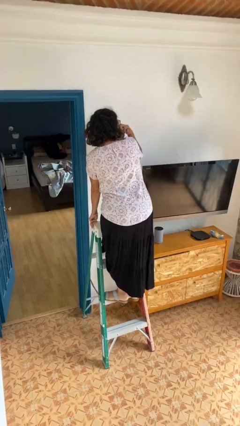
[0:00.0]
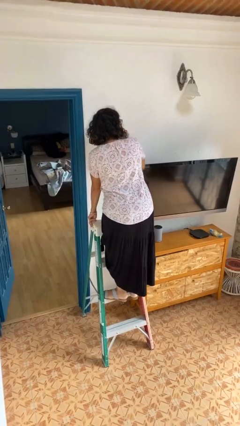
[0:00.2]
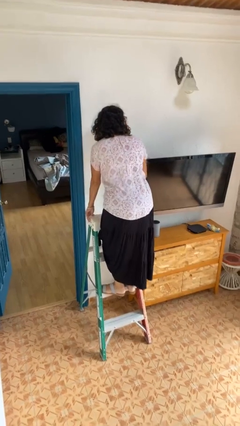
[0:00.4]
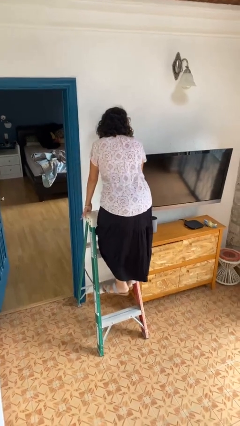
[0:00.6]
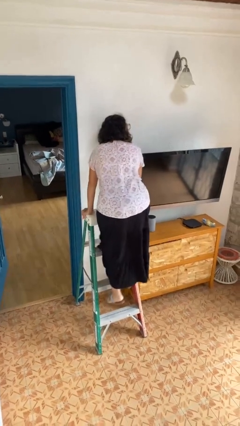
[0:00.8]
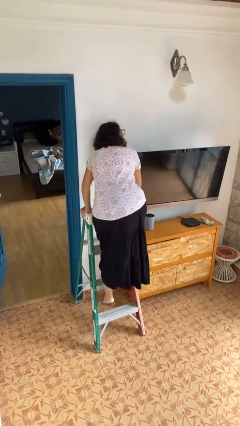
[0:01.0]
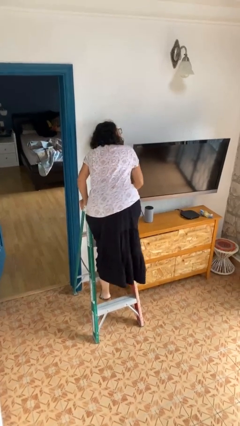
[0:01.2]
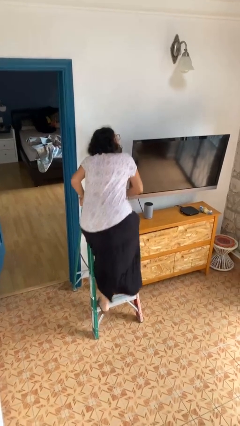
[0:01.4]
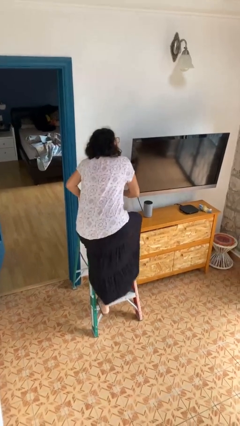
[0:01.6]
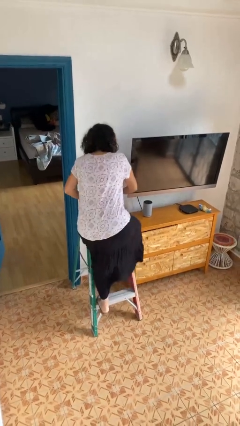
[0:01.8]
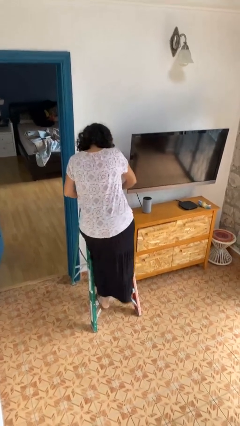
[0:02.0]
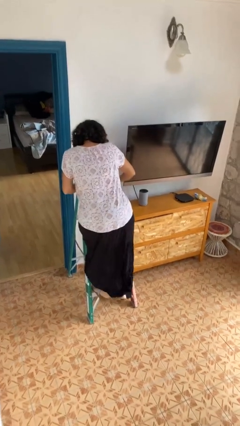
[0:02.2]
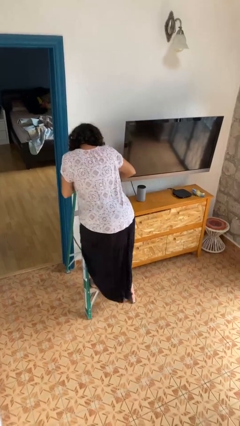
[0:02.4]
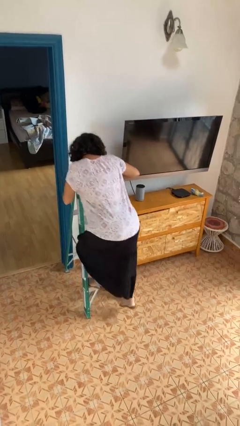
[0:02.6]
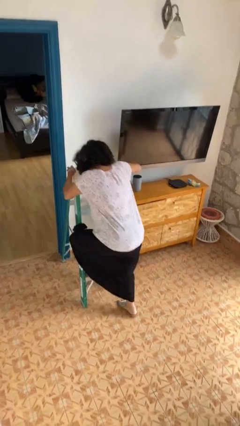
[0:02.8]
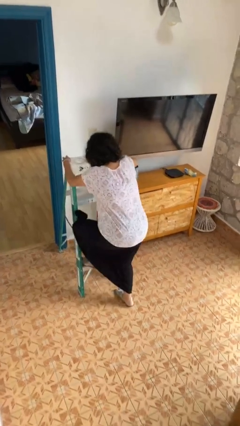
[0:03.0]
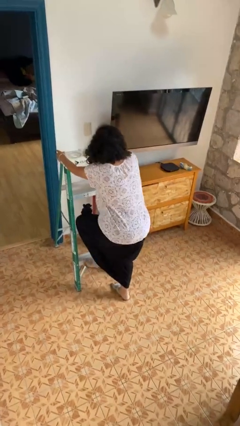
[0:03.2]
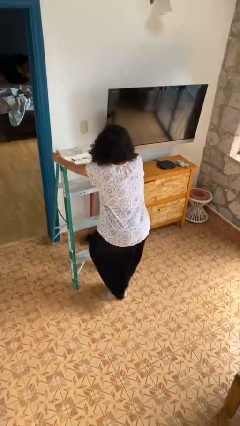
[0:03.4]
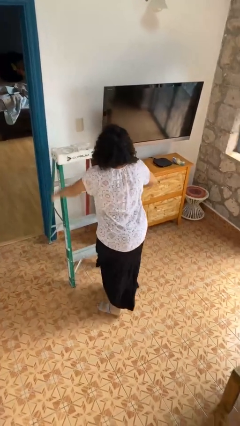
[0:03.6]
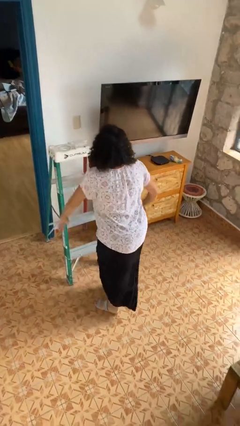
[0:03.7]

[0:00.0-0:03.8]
person climbs down ladder

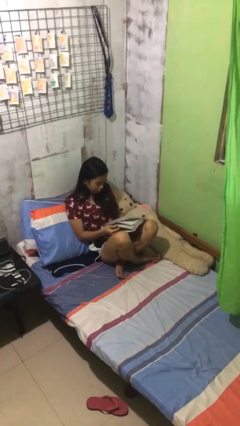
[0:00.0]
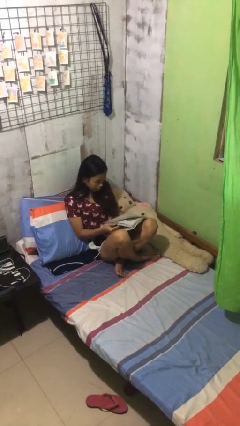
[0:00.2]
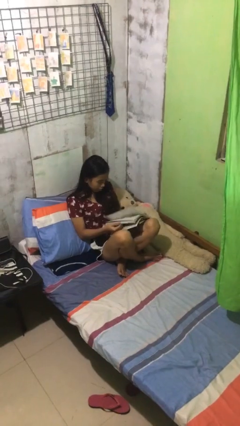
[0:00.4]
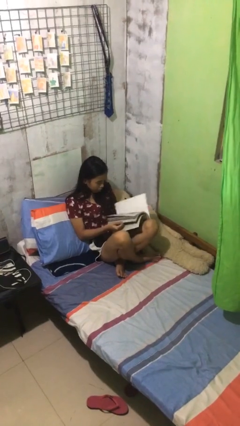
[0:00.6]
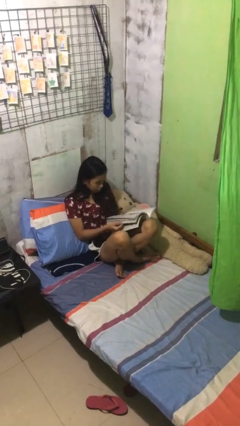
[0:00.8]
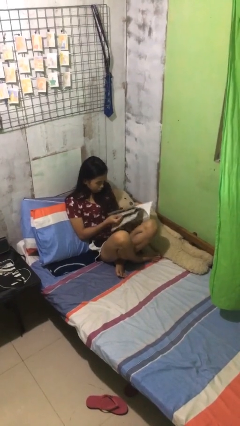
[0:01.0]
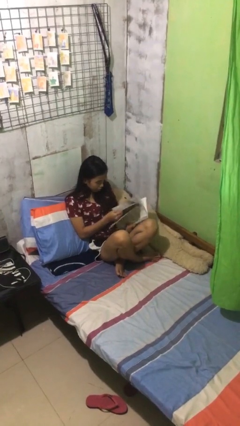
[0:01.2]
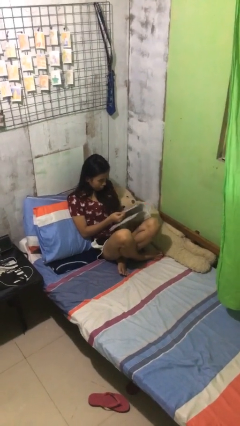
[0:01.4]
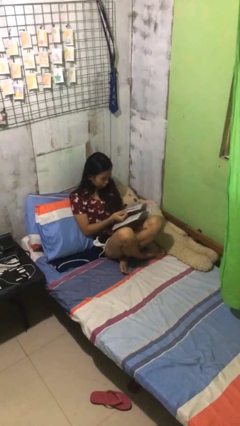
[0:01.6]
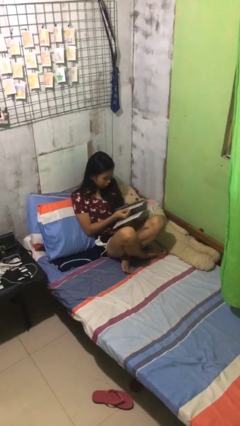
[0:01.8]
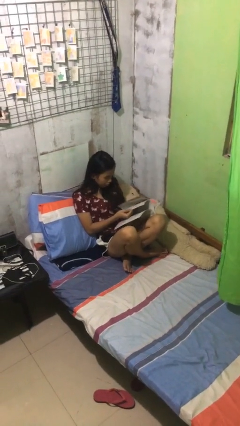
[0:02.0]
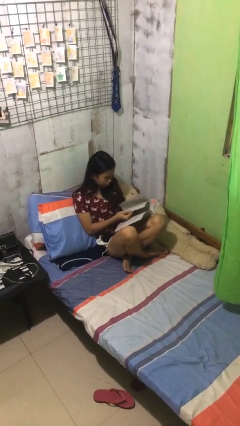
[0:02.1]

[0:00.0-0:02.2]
person reads document

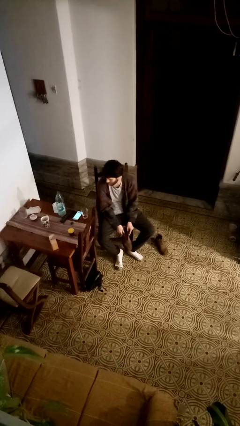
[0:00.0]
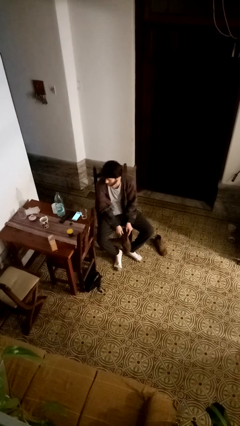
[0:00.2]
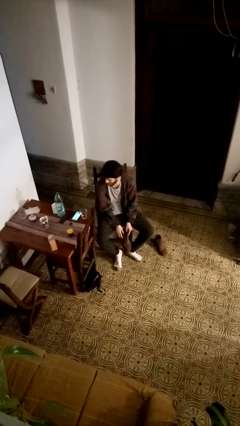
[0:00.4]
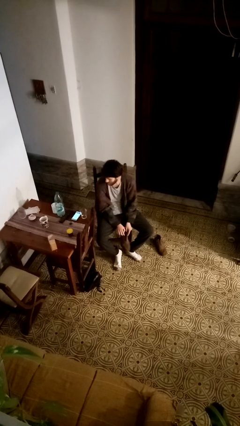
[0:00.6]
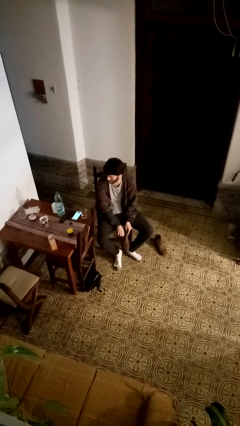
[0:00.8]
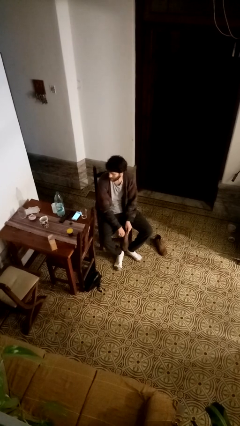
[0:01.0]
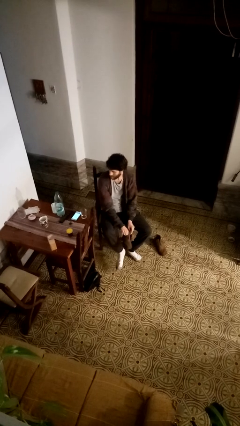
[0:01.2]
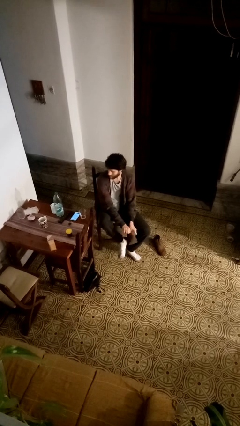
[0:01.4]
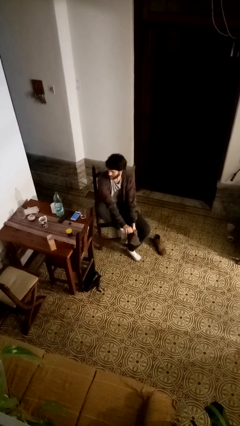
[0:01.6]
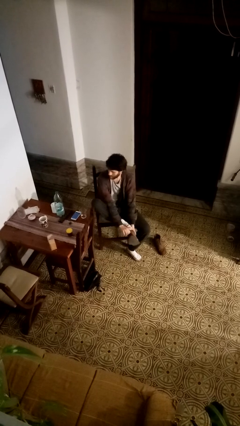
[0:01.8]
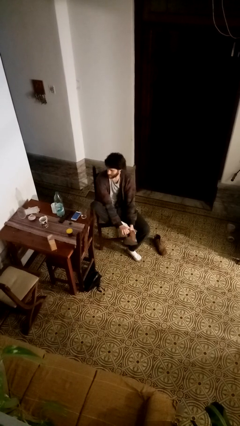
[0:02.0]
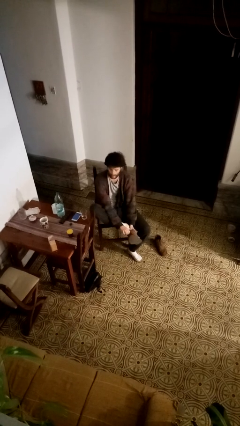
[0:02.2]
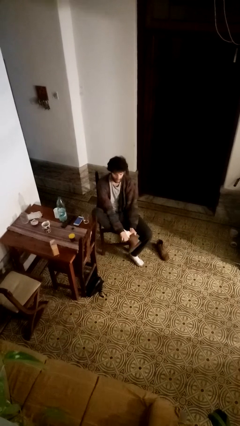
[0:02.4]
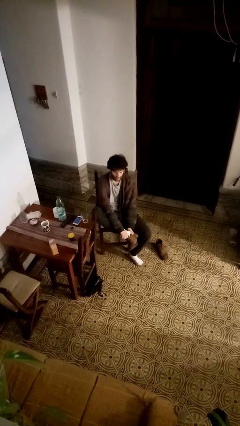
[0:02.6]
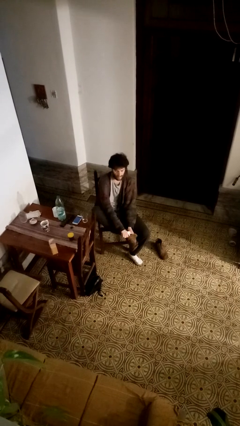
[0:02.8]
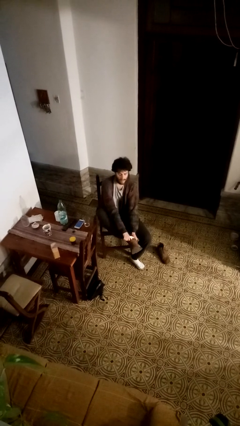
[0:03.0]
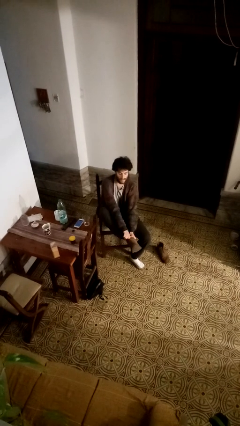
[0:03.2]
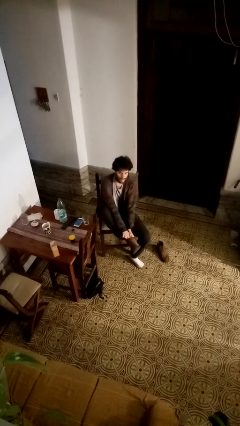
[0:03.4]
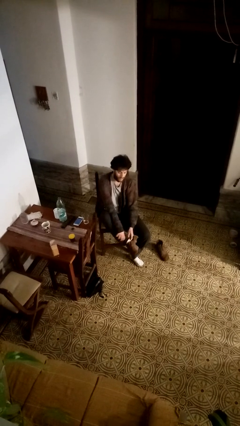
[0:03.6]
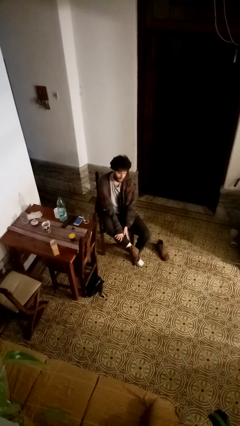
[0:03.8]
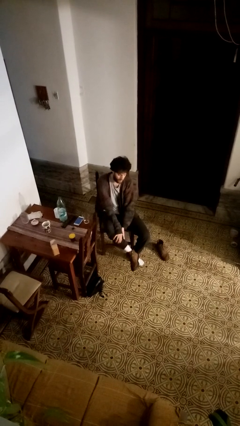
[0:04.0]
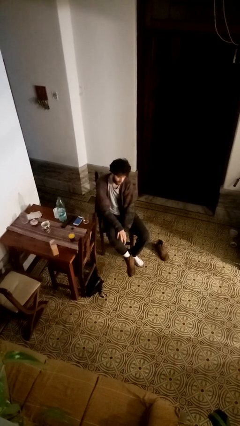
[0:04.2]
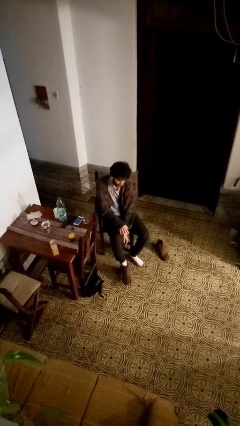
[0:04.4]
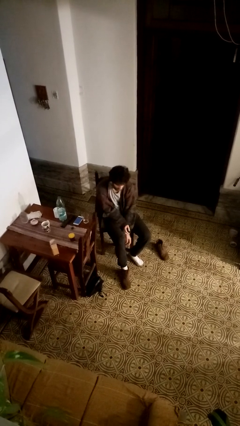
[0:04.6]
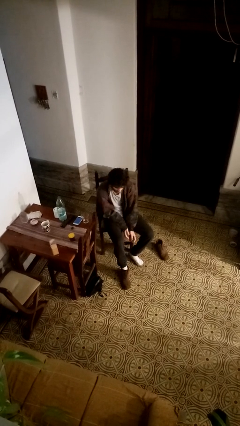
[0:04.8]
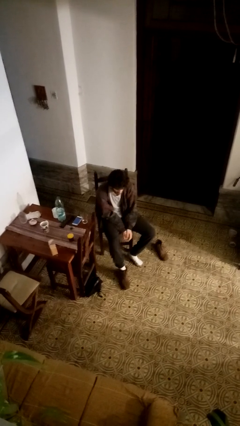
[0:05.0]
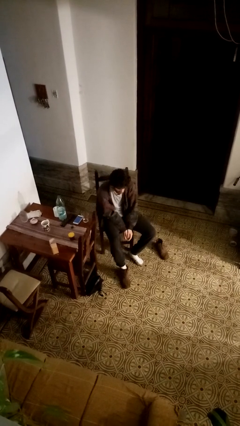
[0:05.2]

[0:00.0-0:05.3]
person puts on boots

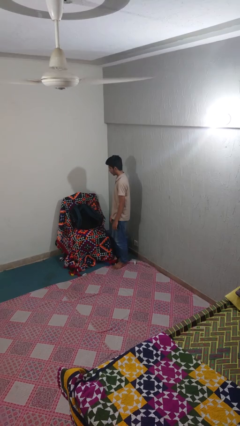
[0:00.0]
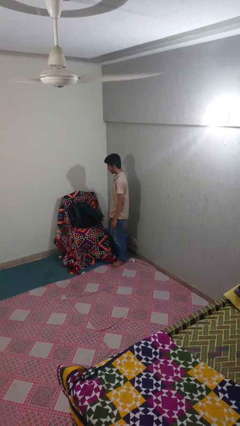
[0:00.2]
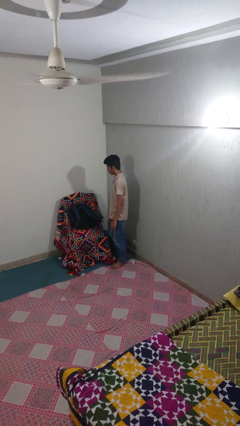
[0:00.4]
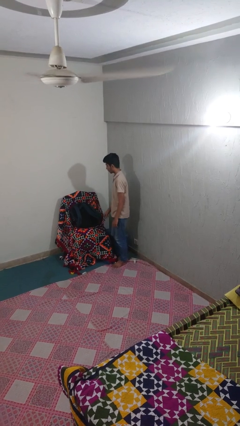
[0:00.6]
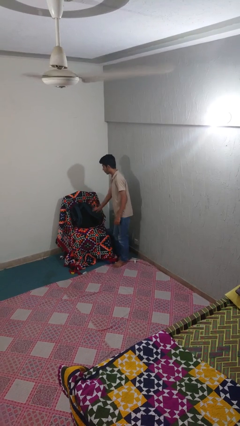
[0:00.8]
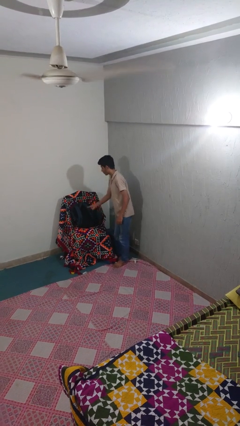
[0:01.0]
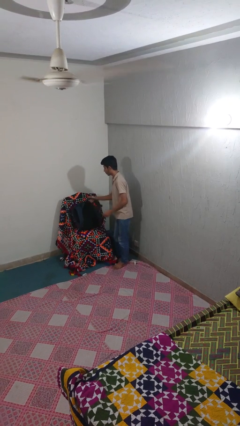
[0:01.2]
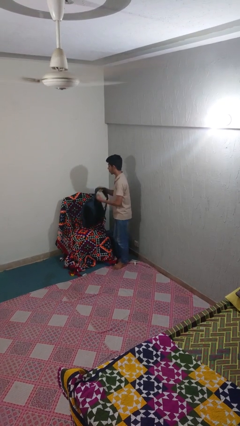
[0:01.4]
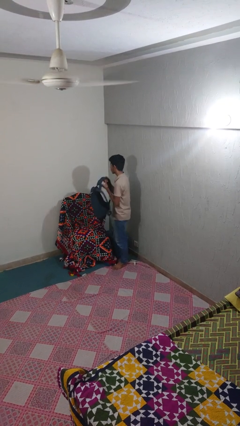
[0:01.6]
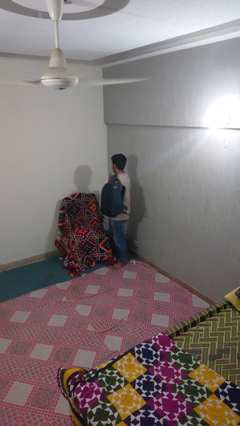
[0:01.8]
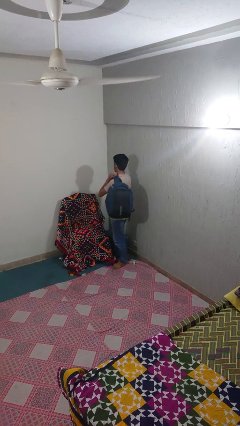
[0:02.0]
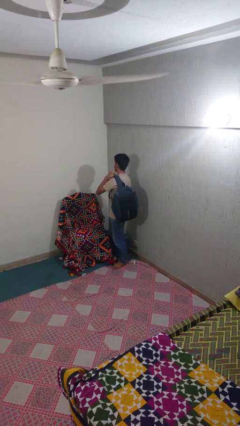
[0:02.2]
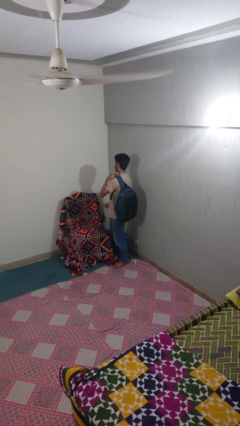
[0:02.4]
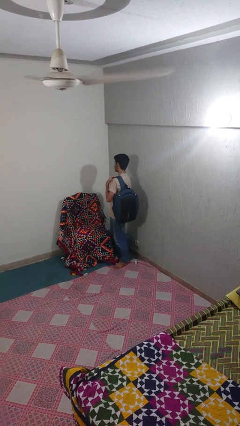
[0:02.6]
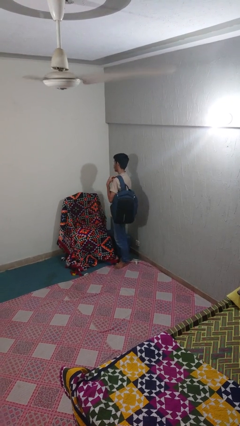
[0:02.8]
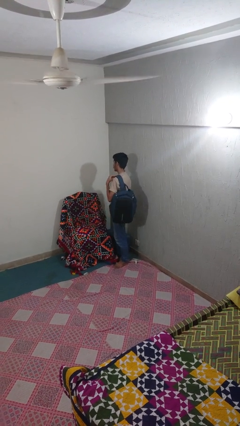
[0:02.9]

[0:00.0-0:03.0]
person picks up object from couch

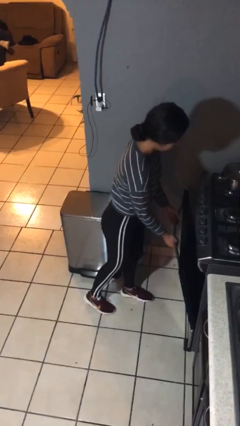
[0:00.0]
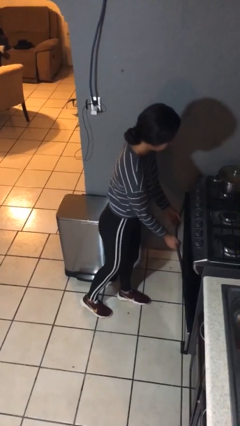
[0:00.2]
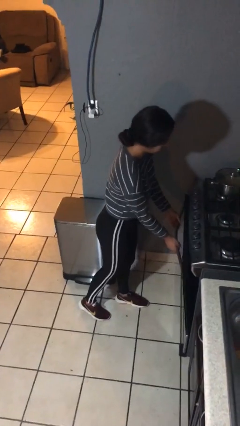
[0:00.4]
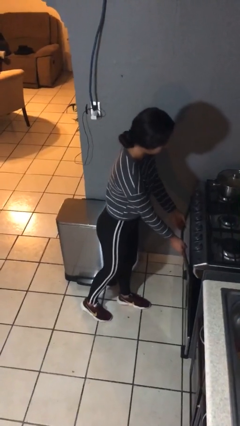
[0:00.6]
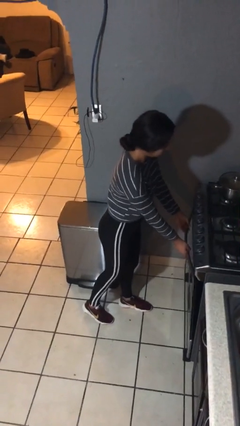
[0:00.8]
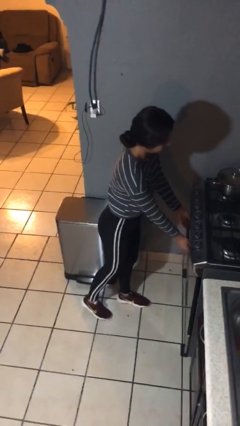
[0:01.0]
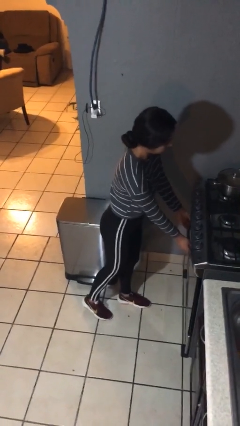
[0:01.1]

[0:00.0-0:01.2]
person closes oven door

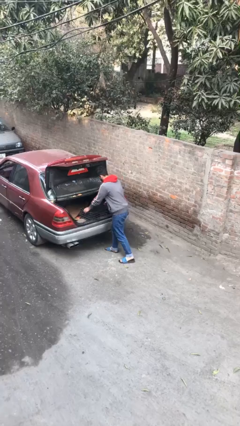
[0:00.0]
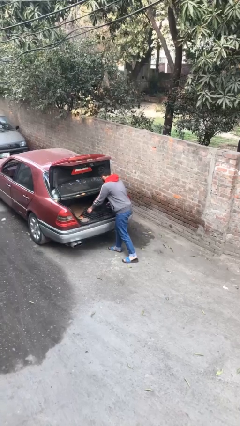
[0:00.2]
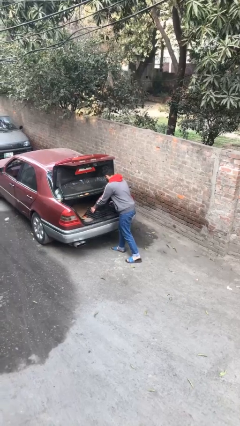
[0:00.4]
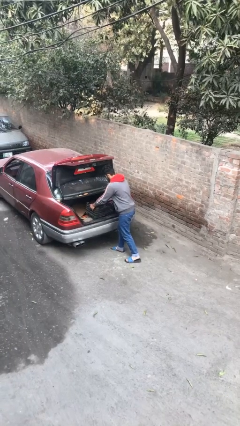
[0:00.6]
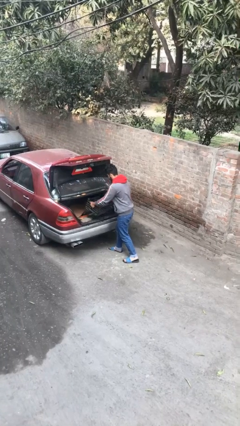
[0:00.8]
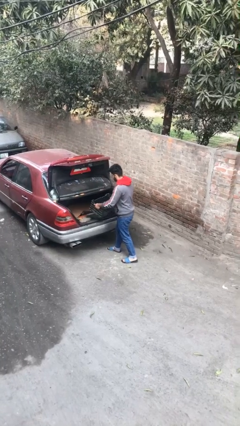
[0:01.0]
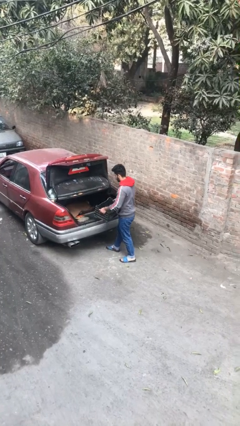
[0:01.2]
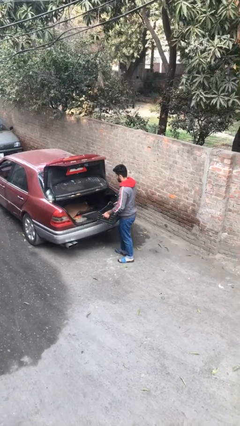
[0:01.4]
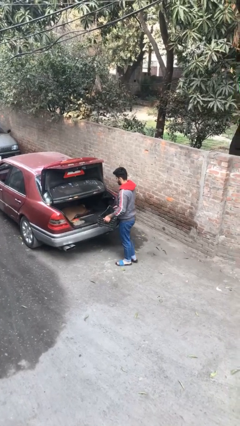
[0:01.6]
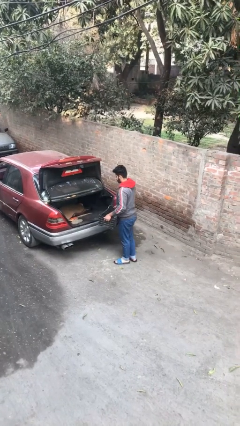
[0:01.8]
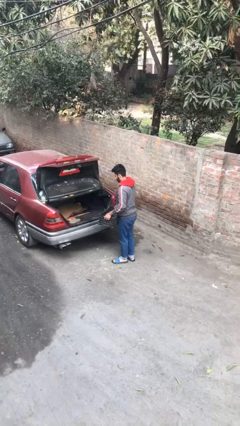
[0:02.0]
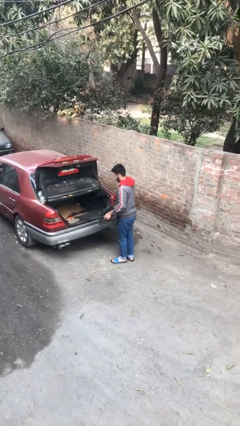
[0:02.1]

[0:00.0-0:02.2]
person unloads car
